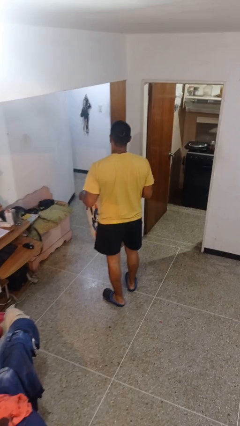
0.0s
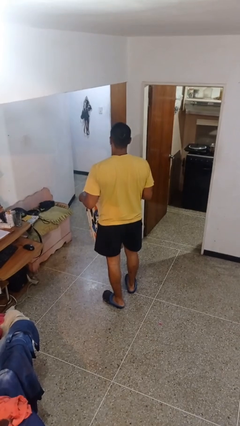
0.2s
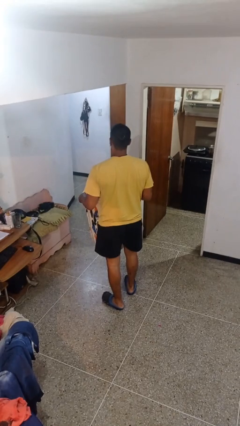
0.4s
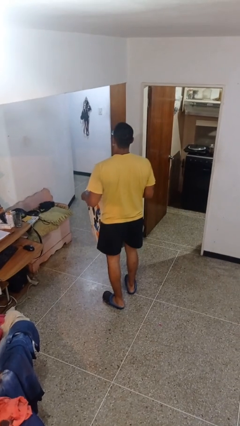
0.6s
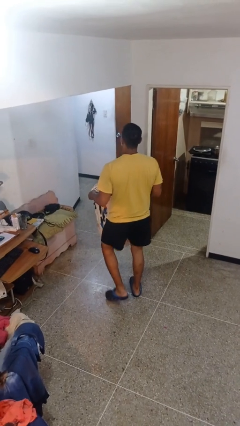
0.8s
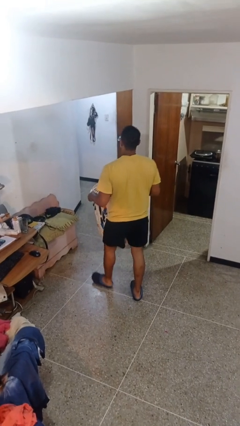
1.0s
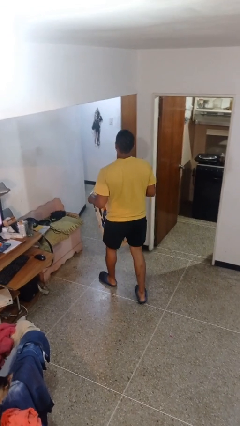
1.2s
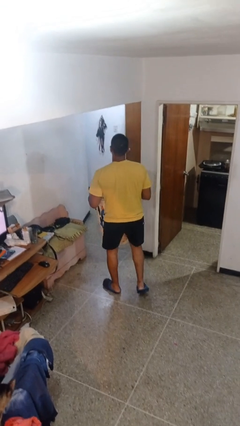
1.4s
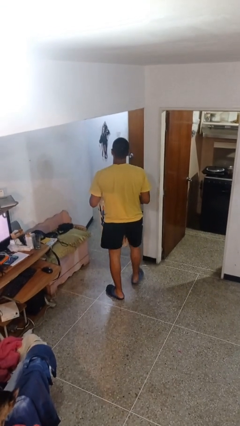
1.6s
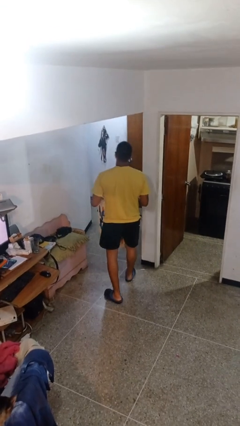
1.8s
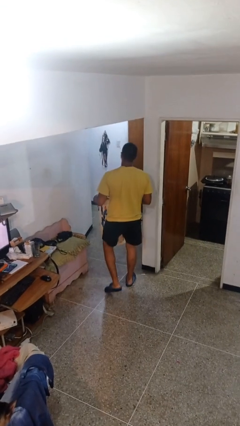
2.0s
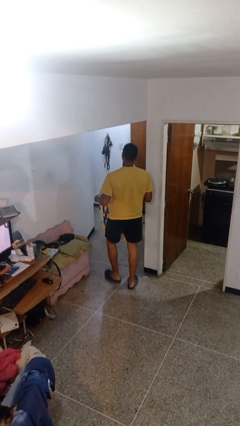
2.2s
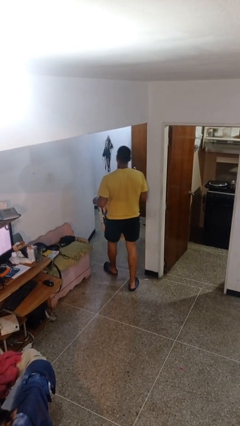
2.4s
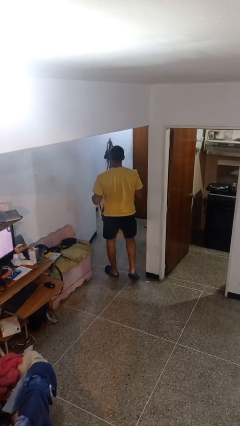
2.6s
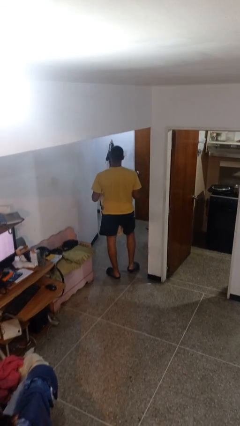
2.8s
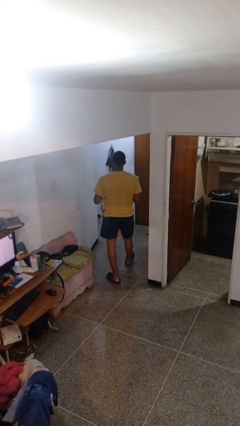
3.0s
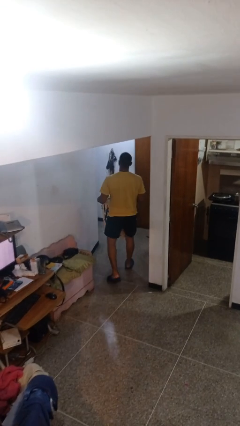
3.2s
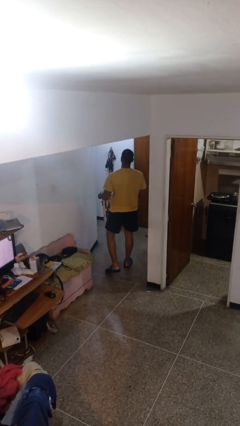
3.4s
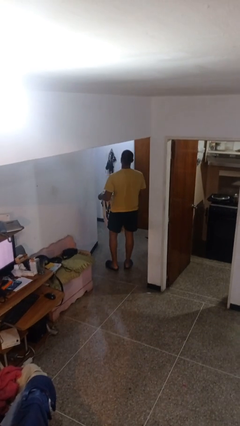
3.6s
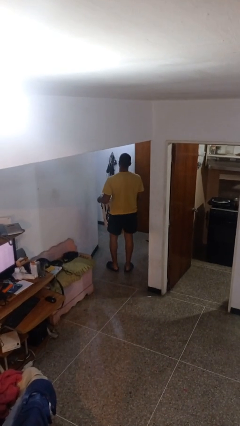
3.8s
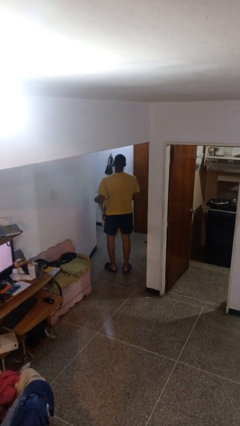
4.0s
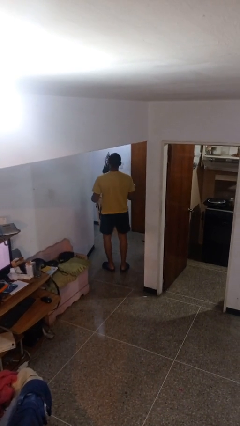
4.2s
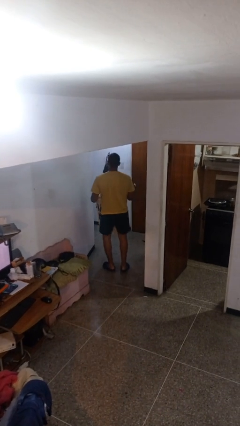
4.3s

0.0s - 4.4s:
person carries laundry basket

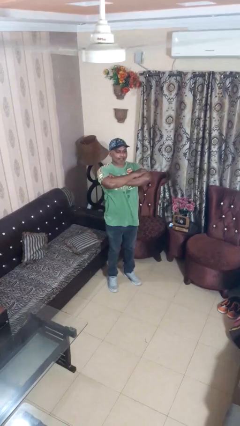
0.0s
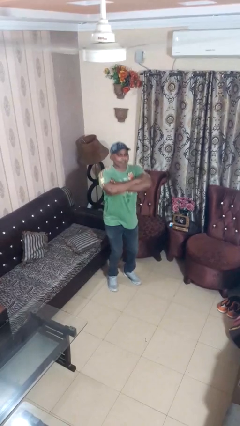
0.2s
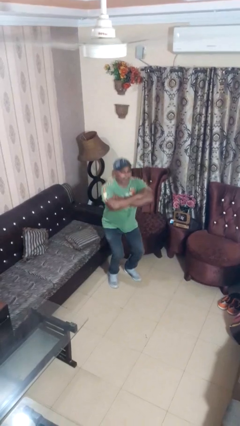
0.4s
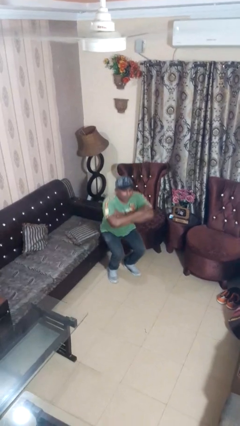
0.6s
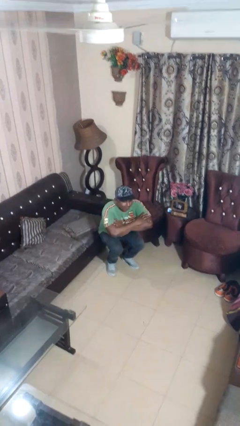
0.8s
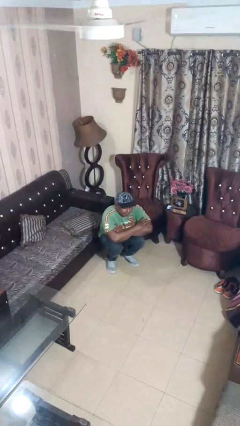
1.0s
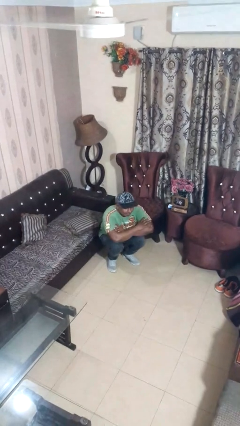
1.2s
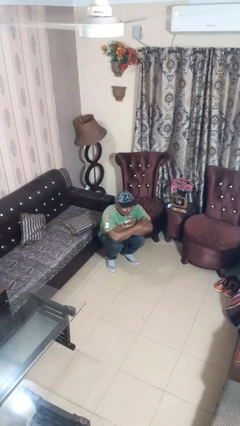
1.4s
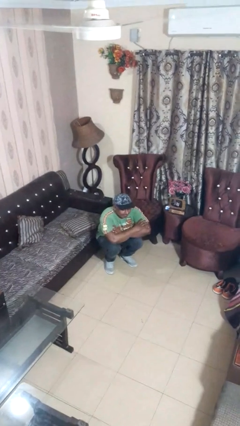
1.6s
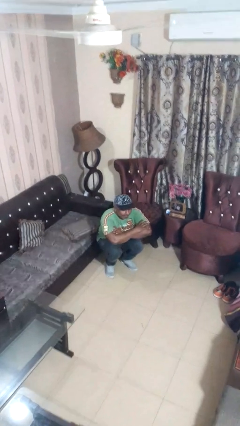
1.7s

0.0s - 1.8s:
person squats

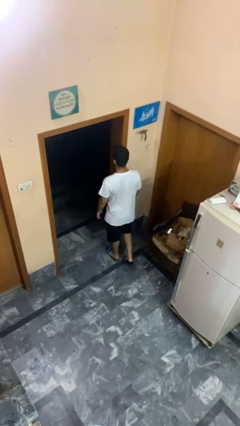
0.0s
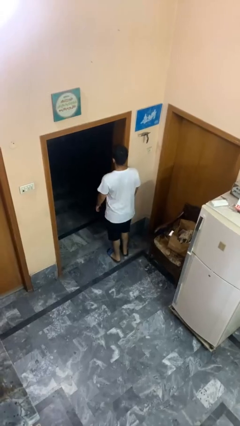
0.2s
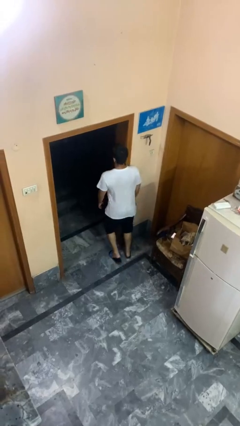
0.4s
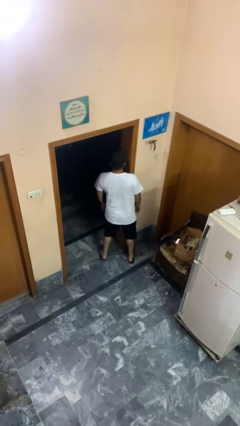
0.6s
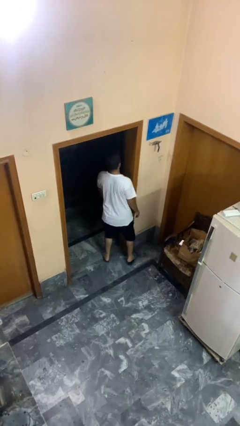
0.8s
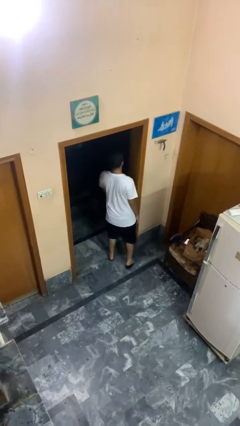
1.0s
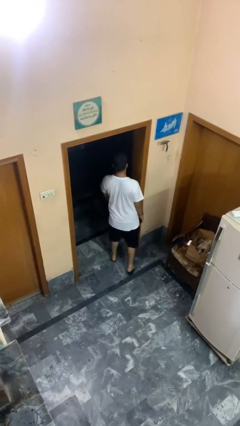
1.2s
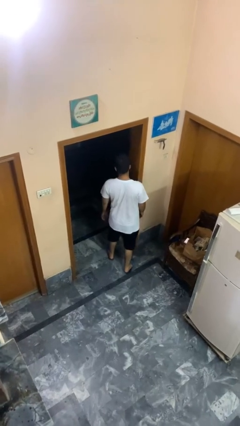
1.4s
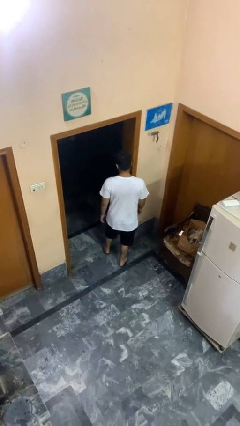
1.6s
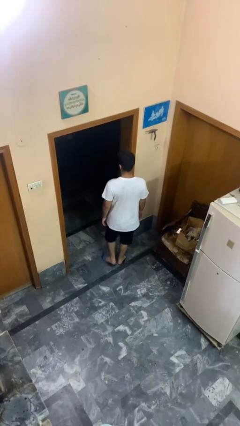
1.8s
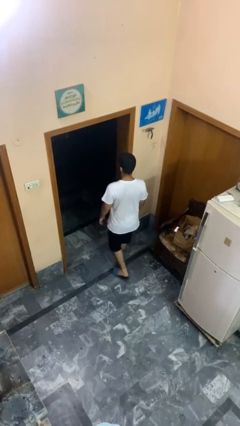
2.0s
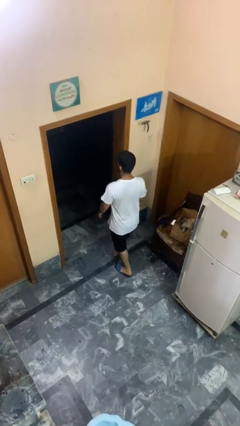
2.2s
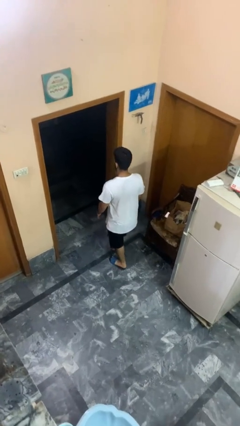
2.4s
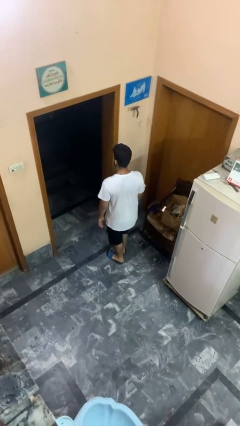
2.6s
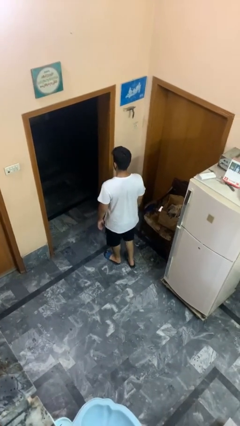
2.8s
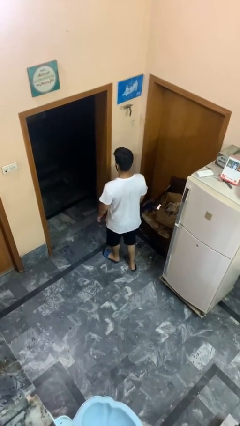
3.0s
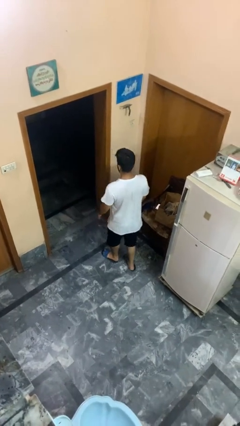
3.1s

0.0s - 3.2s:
person bumps into wall

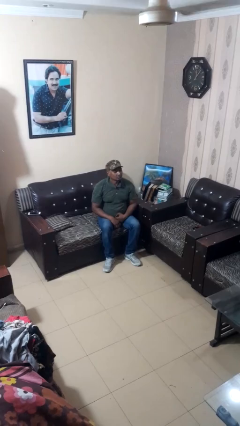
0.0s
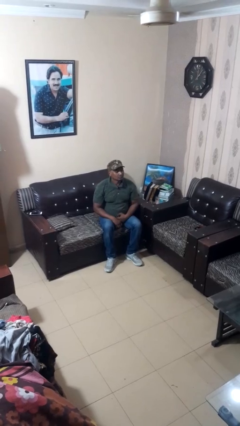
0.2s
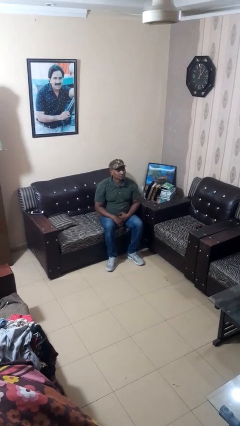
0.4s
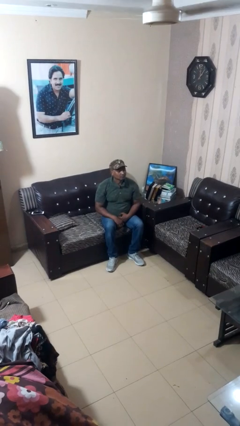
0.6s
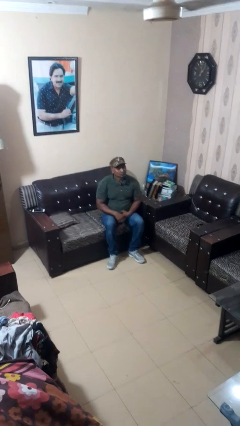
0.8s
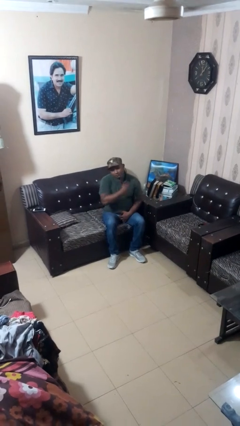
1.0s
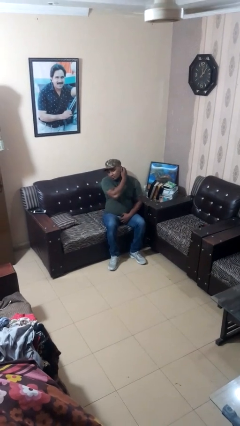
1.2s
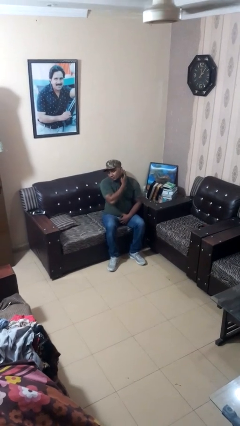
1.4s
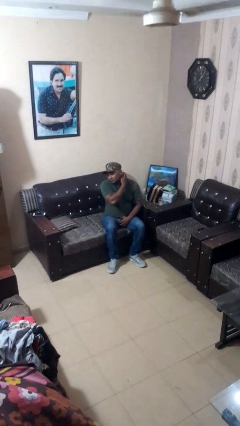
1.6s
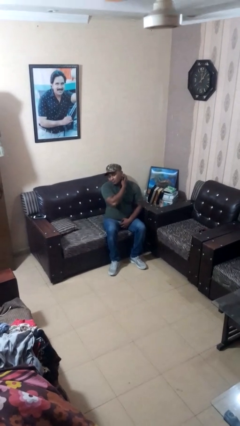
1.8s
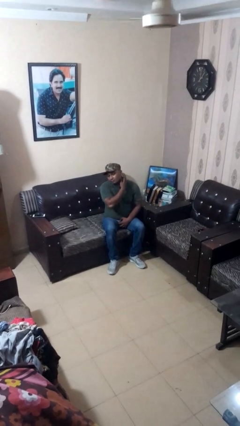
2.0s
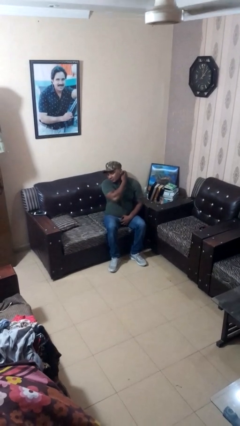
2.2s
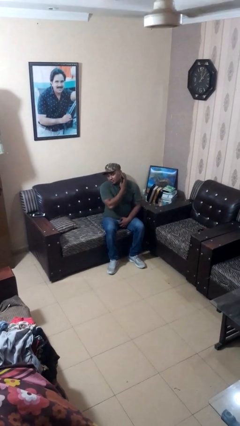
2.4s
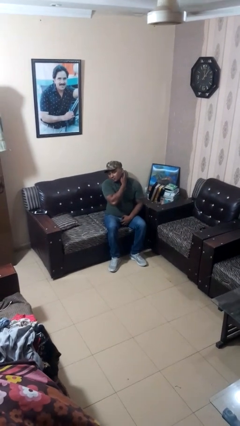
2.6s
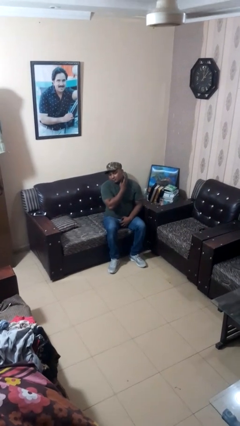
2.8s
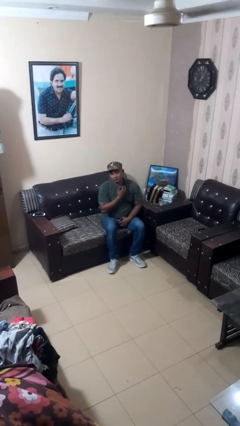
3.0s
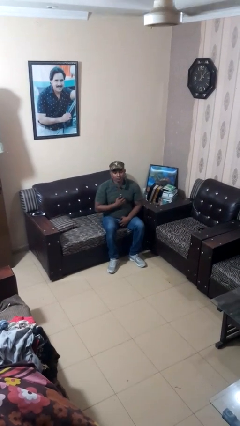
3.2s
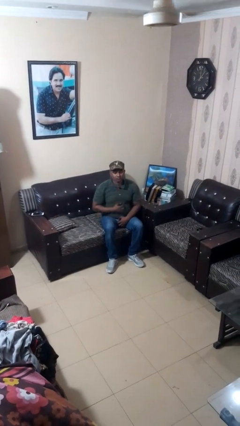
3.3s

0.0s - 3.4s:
person rubs neck

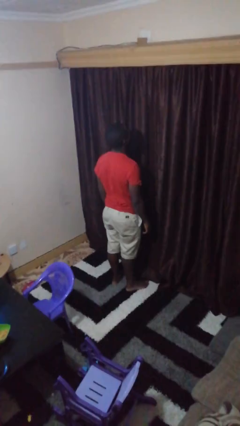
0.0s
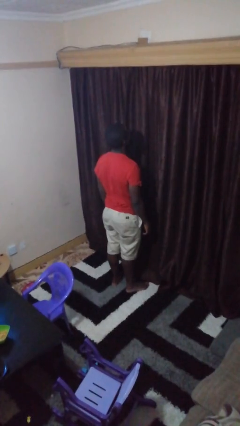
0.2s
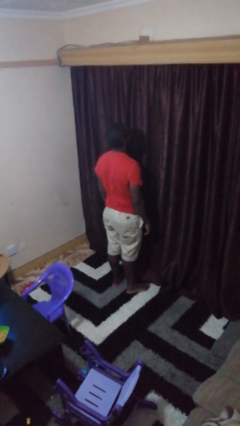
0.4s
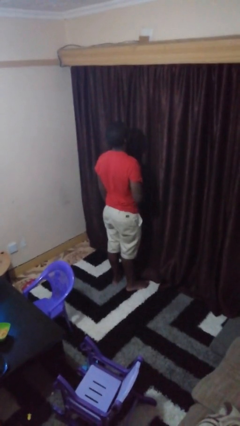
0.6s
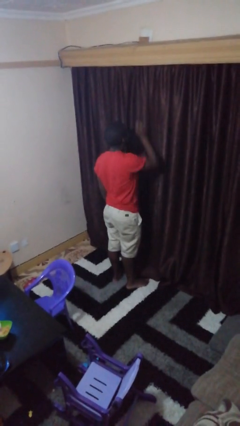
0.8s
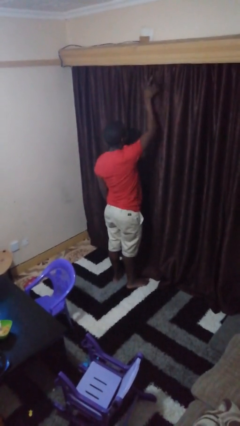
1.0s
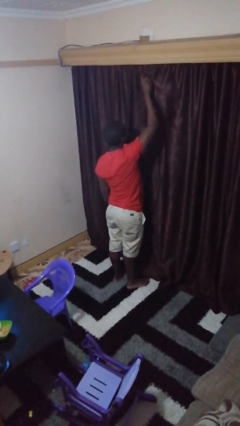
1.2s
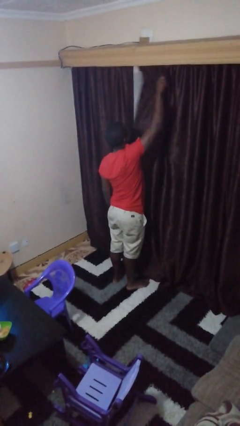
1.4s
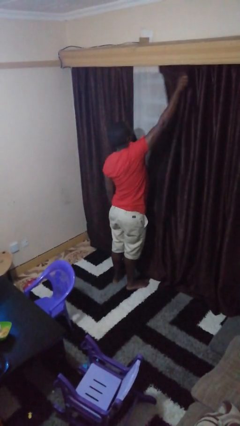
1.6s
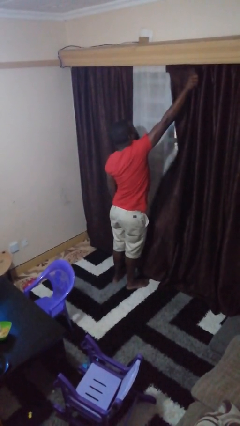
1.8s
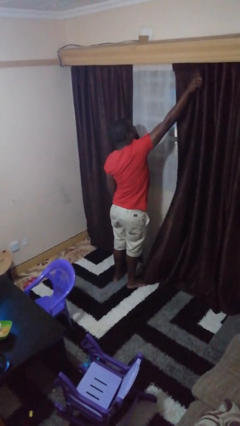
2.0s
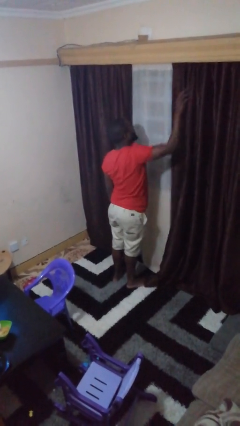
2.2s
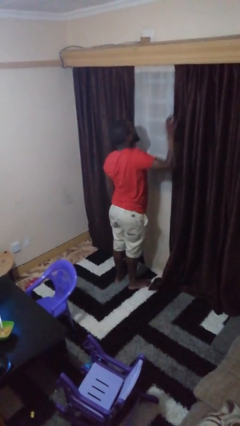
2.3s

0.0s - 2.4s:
person opens curtains

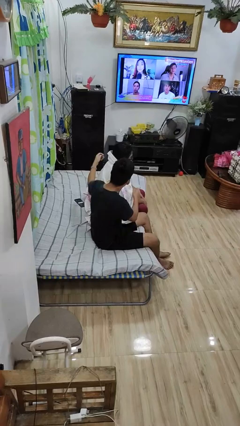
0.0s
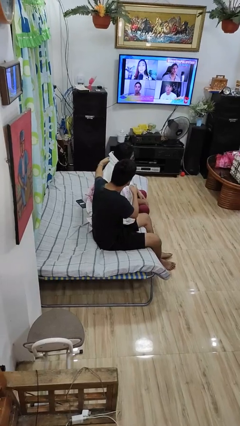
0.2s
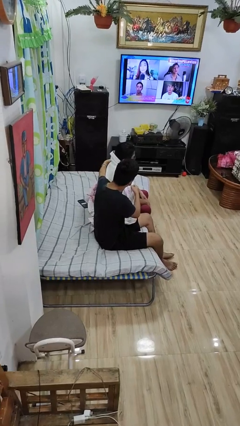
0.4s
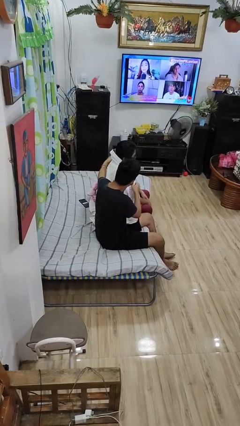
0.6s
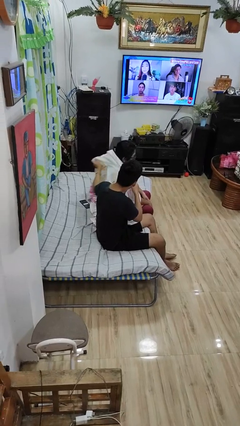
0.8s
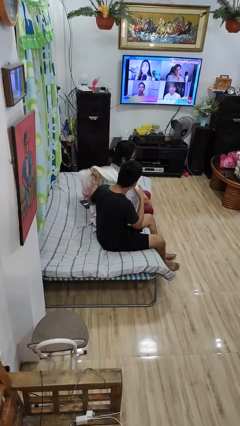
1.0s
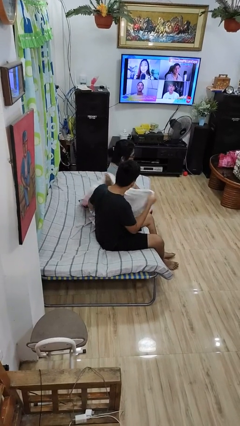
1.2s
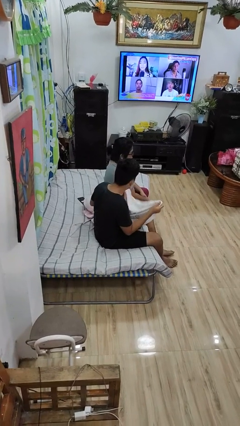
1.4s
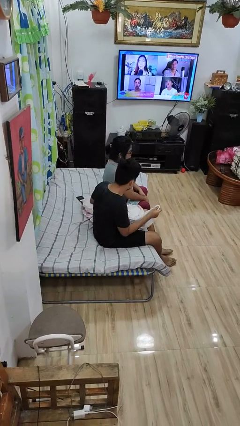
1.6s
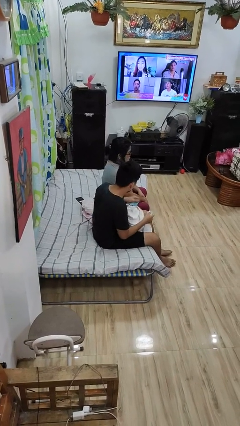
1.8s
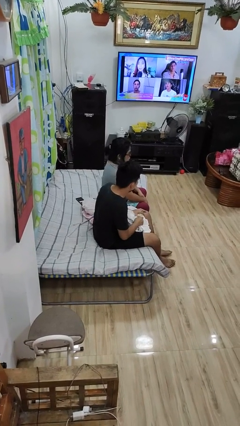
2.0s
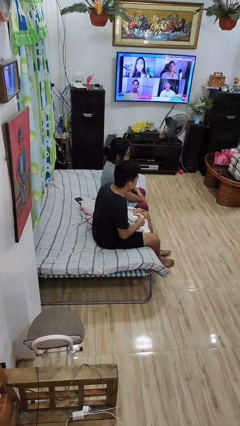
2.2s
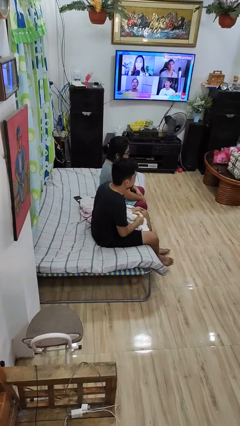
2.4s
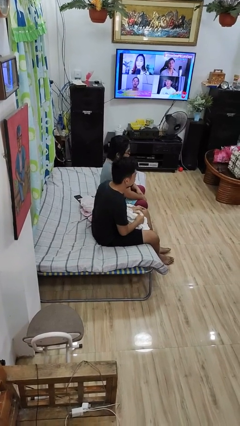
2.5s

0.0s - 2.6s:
person uncovers friend with blanket
